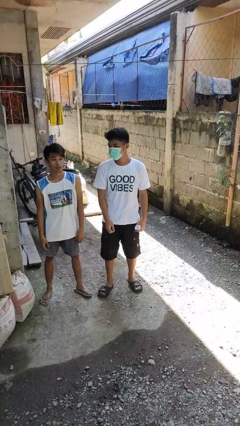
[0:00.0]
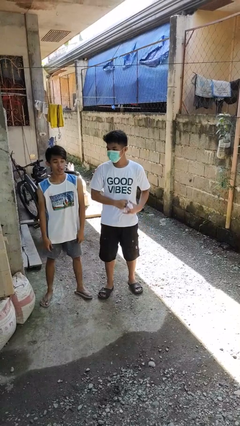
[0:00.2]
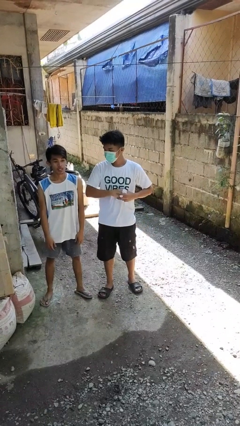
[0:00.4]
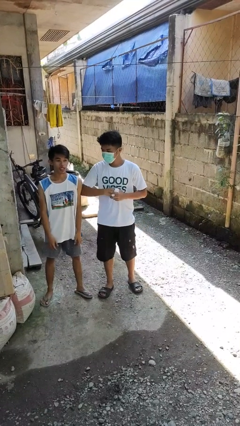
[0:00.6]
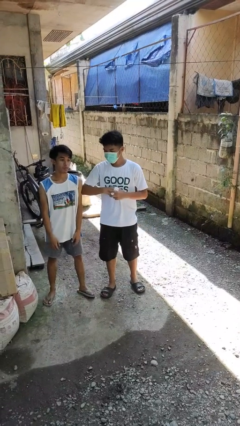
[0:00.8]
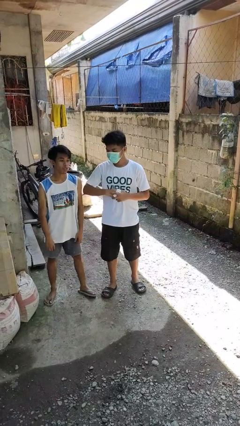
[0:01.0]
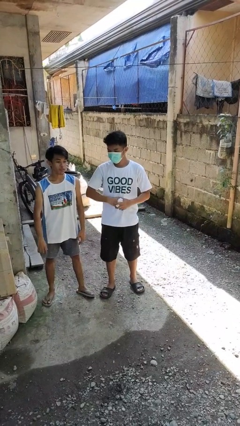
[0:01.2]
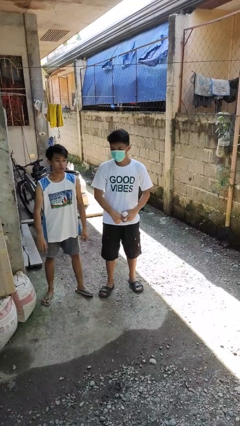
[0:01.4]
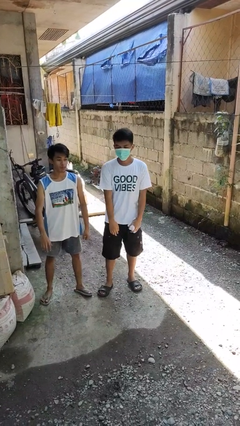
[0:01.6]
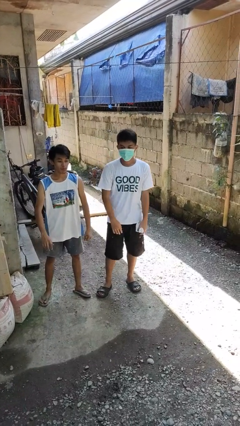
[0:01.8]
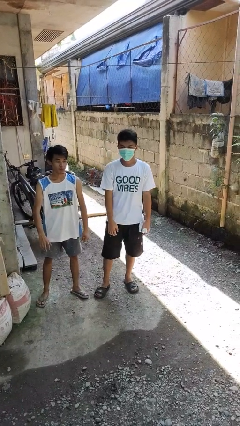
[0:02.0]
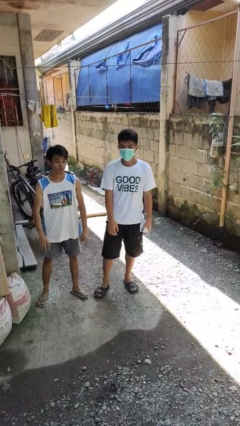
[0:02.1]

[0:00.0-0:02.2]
person nudges person with elbow

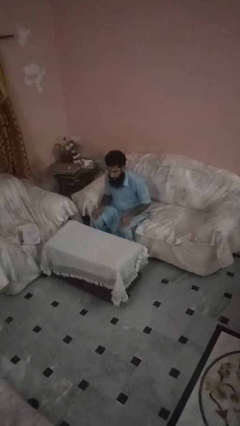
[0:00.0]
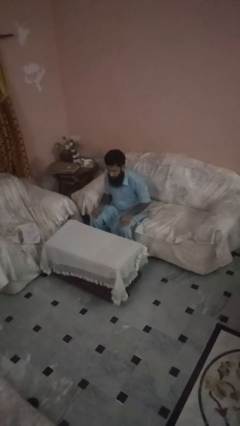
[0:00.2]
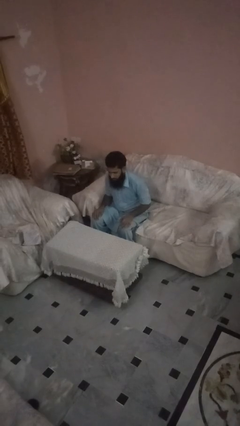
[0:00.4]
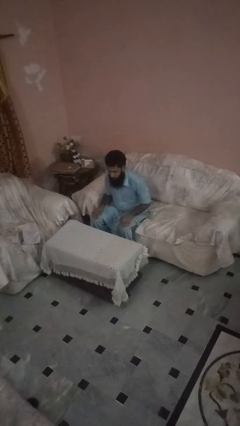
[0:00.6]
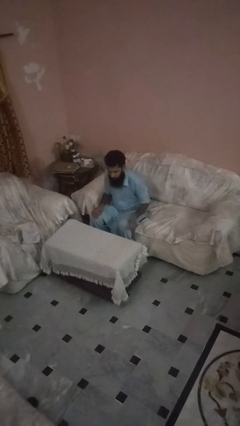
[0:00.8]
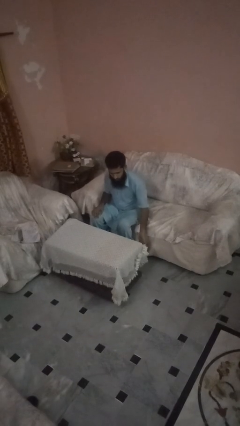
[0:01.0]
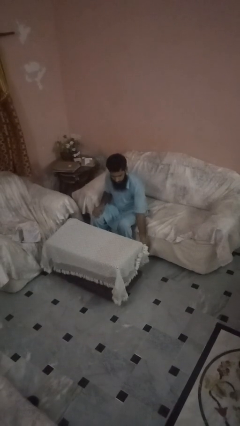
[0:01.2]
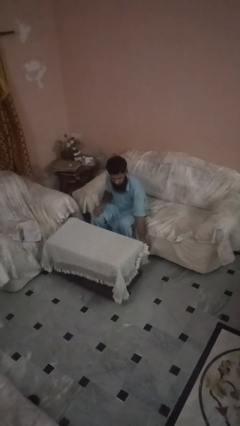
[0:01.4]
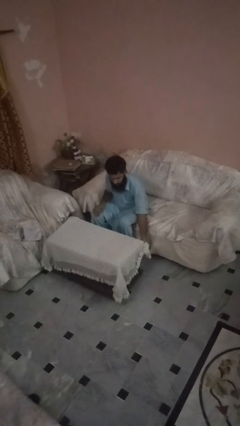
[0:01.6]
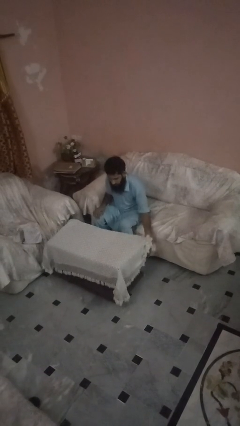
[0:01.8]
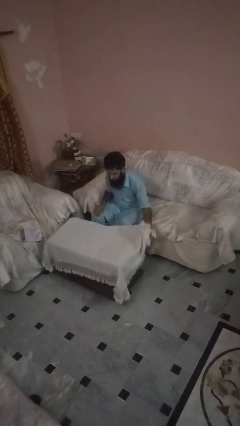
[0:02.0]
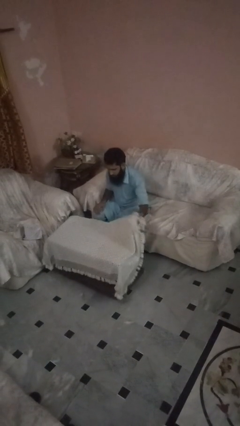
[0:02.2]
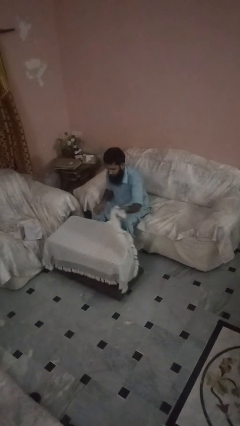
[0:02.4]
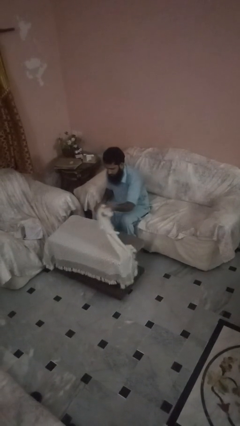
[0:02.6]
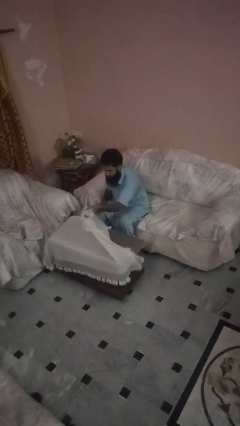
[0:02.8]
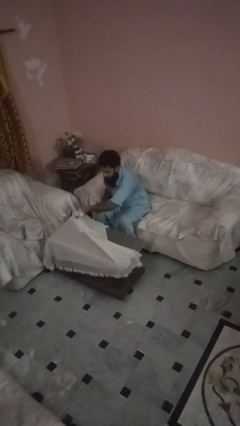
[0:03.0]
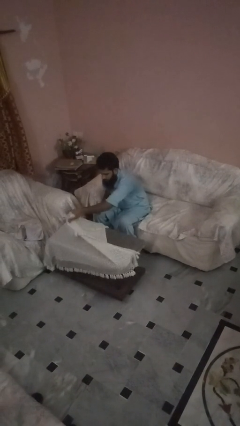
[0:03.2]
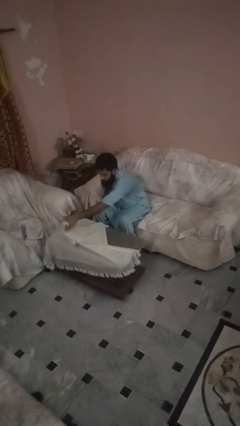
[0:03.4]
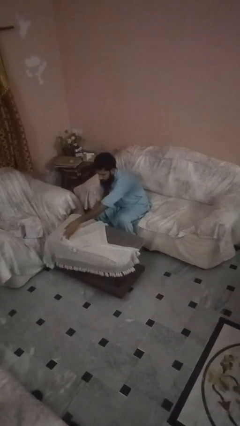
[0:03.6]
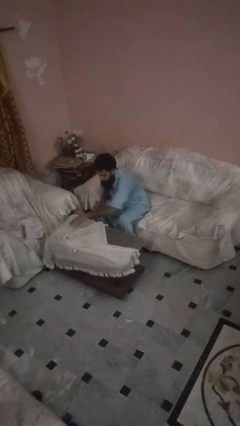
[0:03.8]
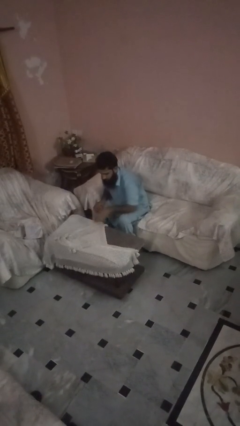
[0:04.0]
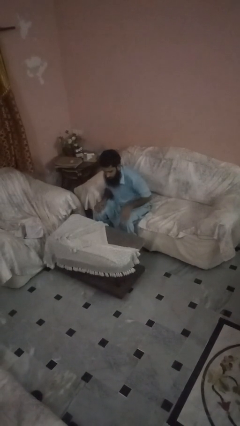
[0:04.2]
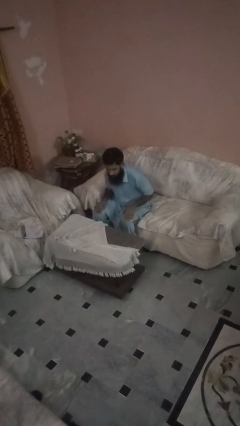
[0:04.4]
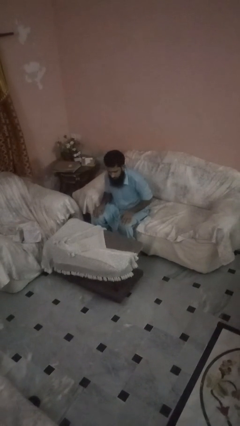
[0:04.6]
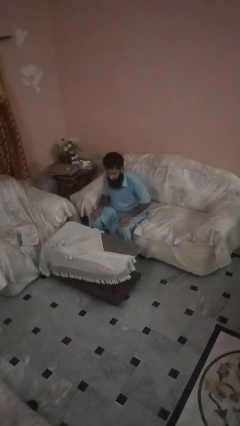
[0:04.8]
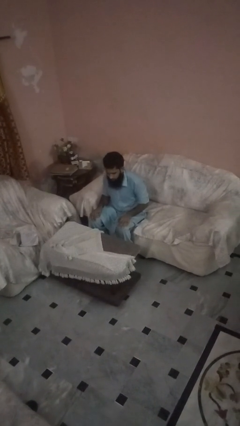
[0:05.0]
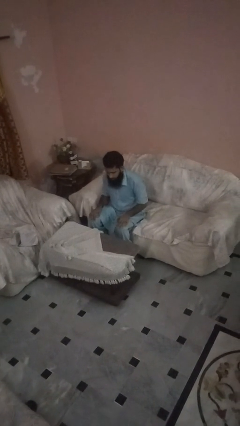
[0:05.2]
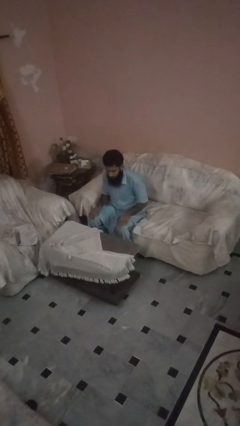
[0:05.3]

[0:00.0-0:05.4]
person folds tablecloth

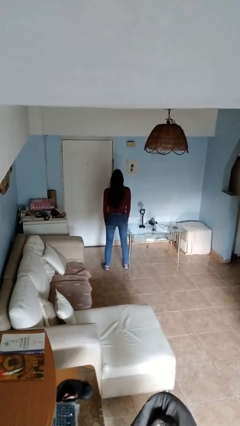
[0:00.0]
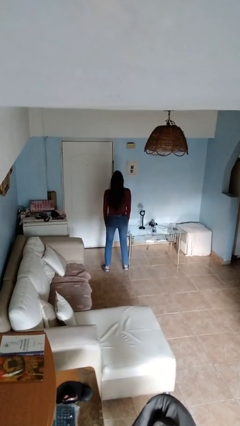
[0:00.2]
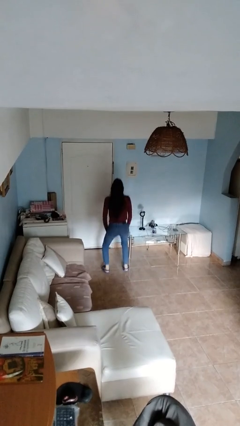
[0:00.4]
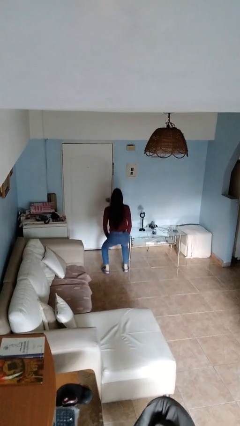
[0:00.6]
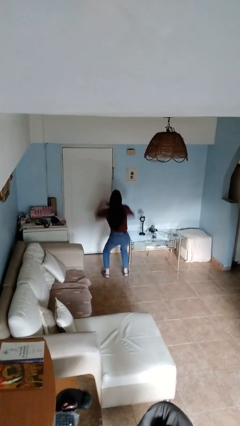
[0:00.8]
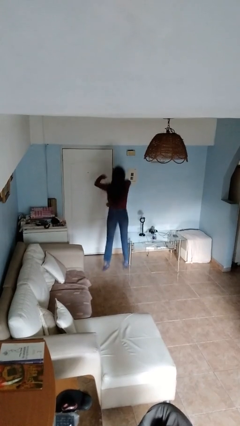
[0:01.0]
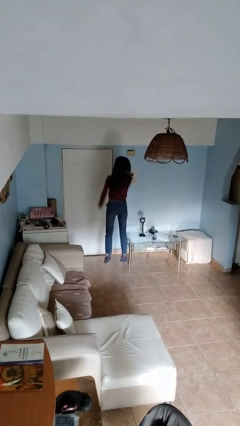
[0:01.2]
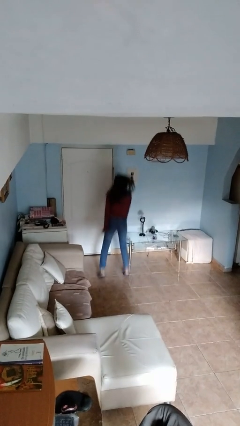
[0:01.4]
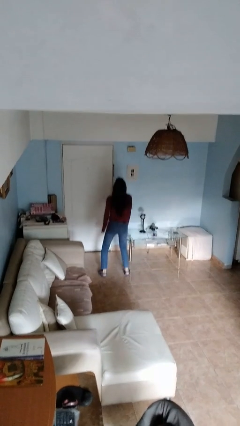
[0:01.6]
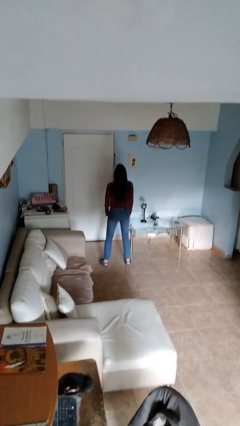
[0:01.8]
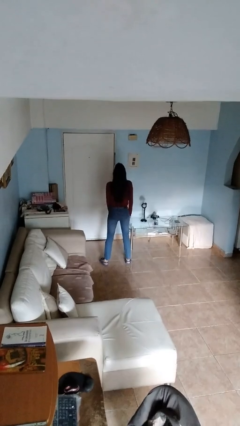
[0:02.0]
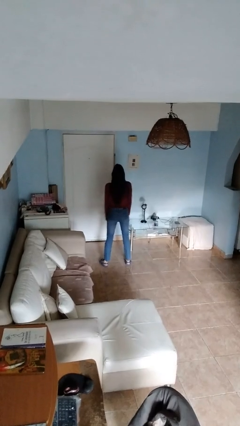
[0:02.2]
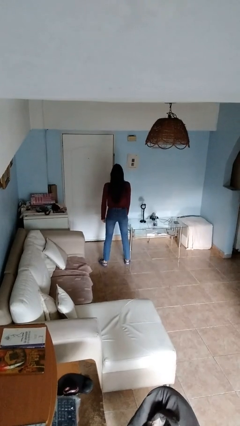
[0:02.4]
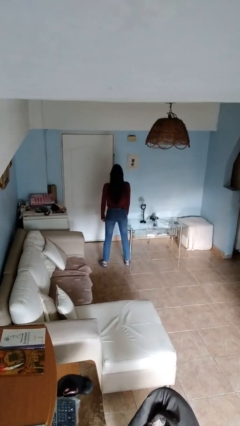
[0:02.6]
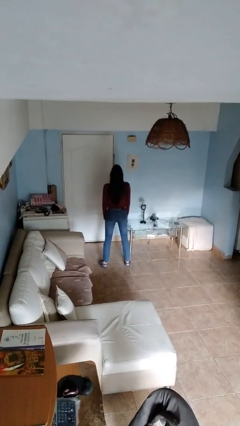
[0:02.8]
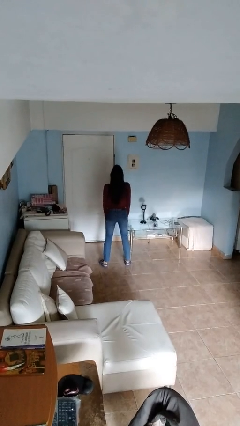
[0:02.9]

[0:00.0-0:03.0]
person jumps

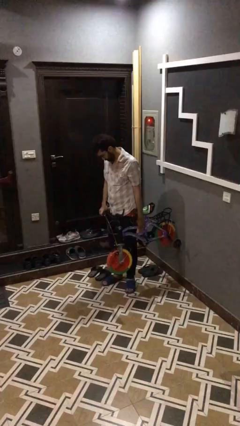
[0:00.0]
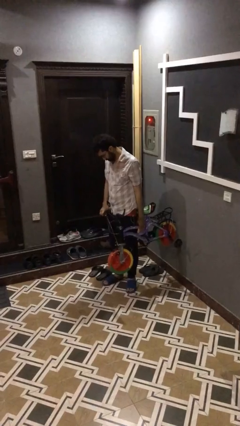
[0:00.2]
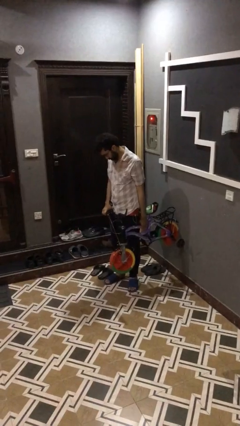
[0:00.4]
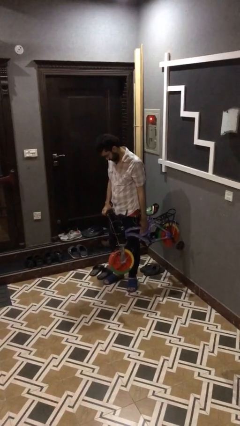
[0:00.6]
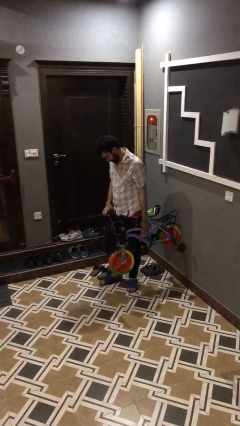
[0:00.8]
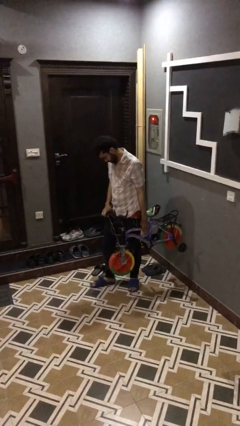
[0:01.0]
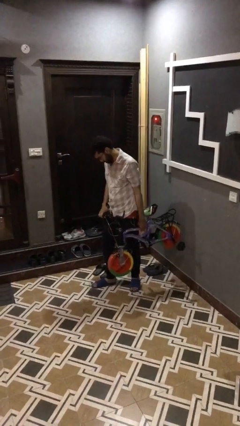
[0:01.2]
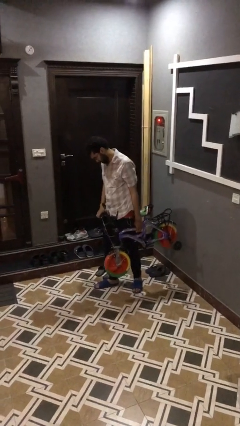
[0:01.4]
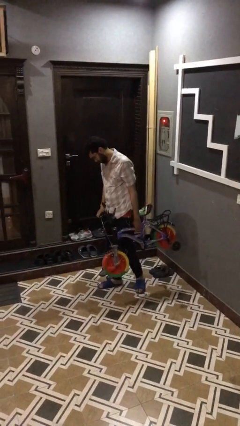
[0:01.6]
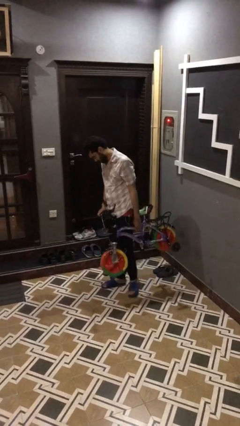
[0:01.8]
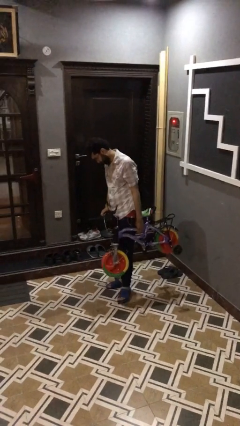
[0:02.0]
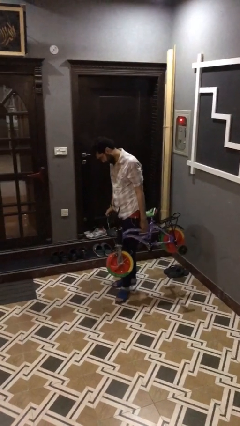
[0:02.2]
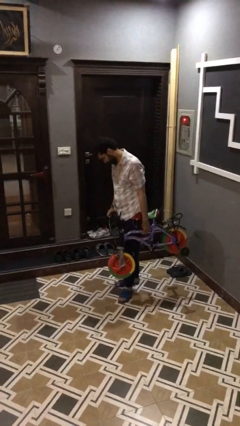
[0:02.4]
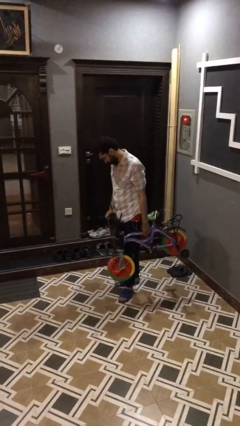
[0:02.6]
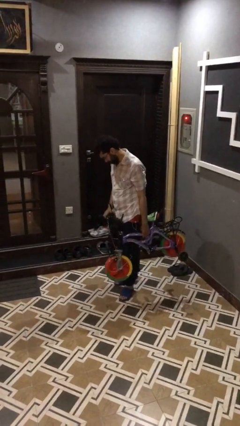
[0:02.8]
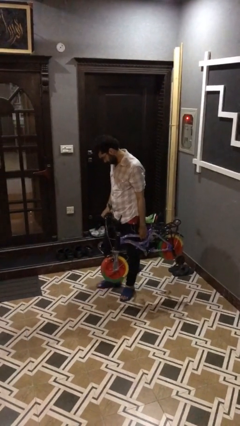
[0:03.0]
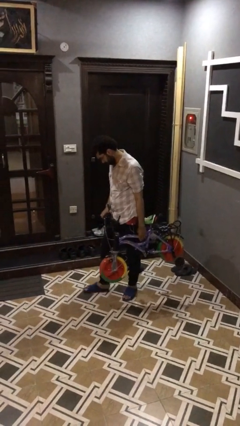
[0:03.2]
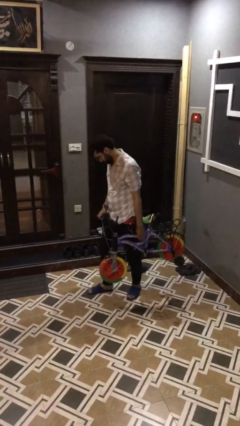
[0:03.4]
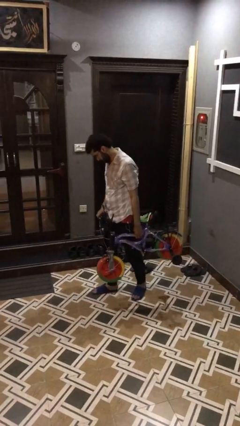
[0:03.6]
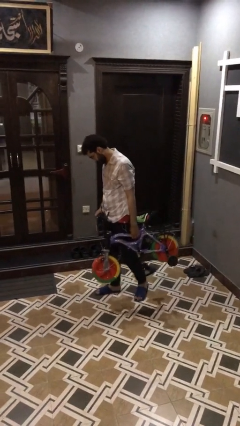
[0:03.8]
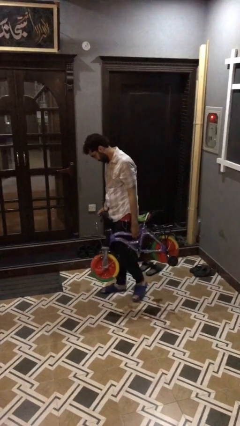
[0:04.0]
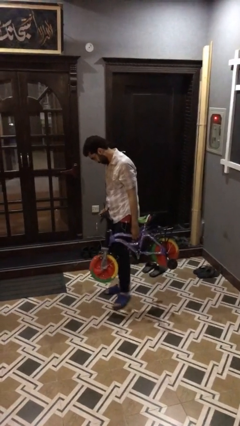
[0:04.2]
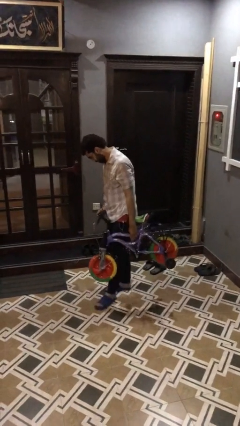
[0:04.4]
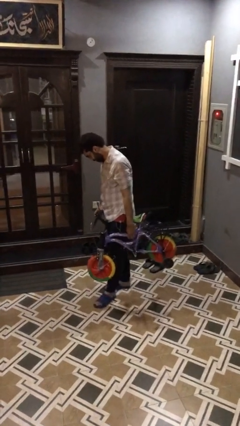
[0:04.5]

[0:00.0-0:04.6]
person carries heavy object

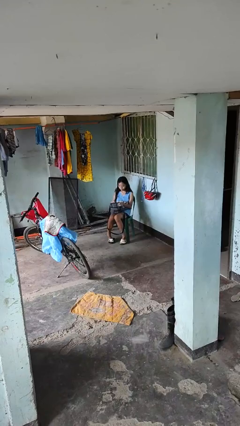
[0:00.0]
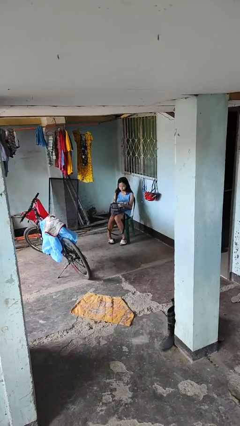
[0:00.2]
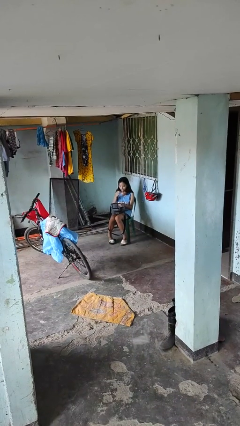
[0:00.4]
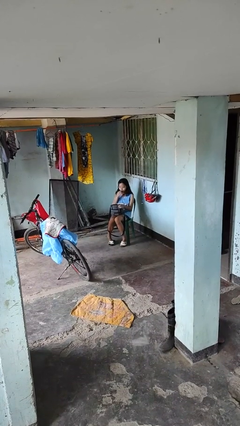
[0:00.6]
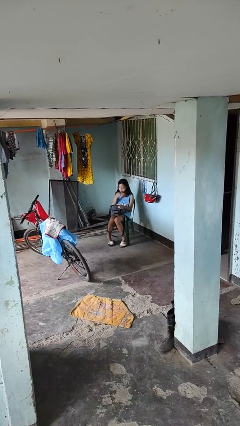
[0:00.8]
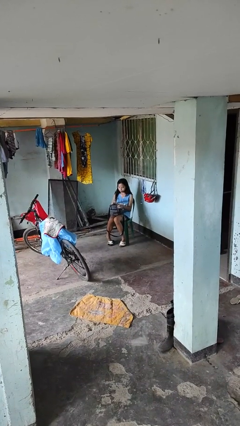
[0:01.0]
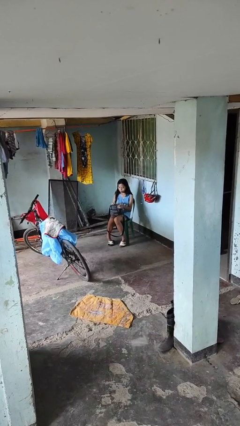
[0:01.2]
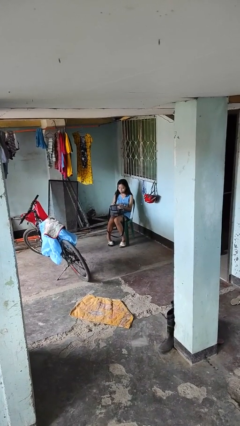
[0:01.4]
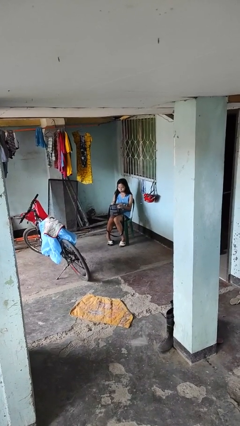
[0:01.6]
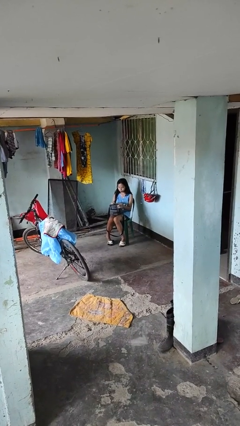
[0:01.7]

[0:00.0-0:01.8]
person eats snack from bag

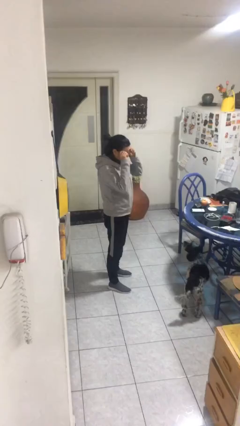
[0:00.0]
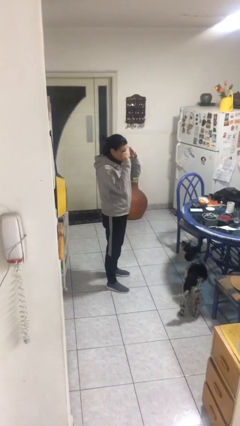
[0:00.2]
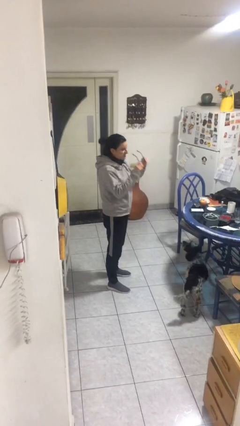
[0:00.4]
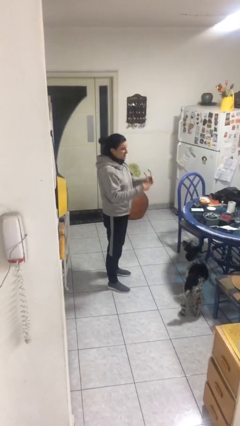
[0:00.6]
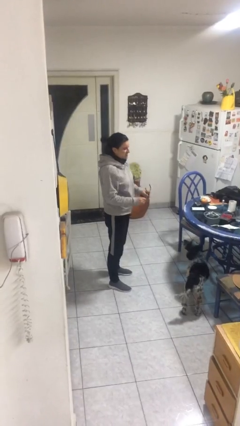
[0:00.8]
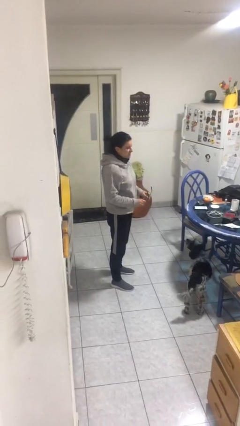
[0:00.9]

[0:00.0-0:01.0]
person takes off glasses
